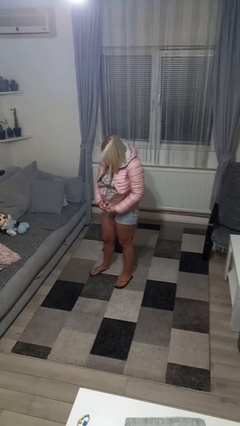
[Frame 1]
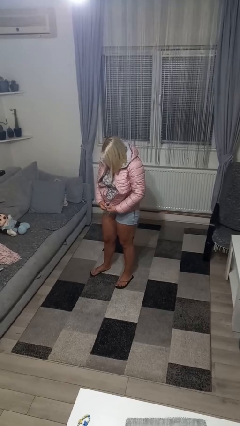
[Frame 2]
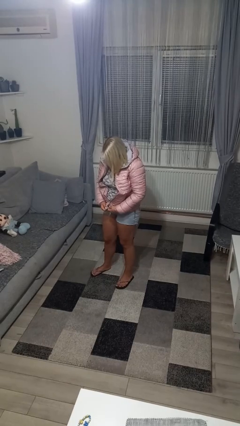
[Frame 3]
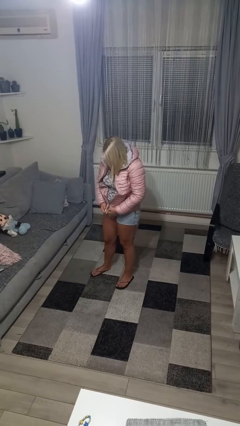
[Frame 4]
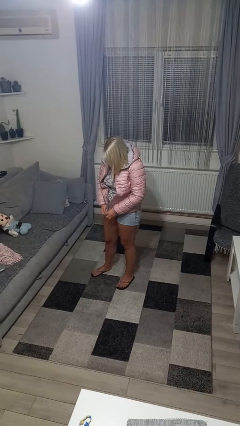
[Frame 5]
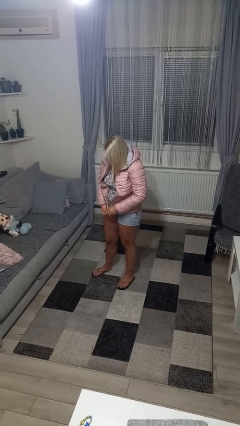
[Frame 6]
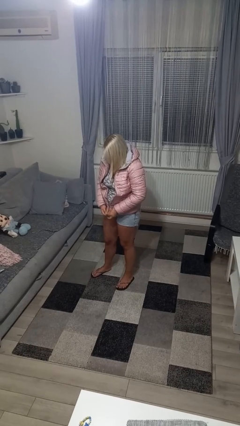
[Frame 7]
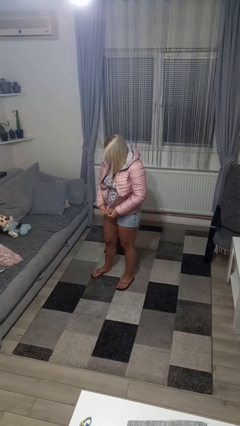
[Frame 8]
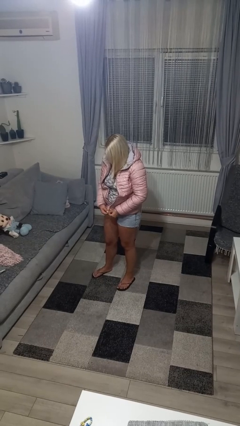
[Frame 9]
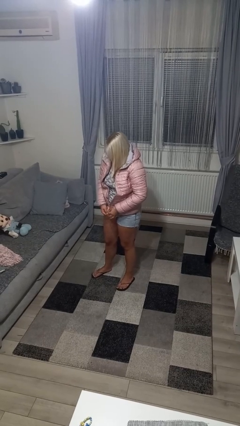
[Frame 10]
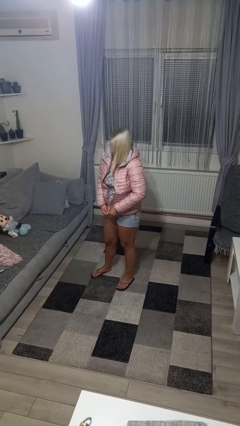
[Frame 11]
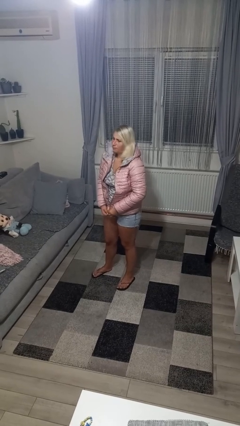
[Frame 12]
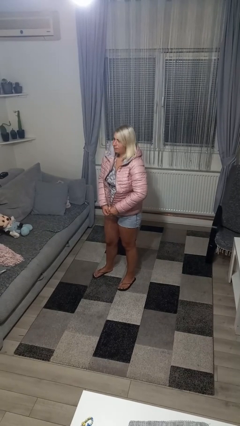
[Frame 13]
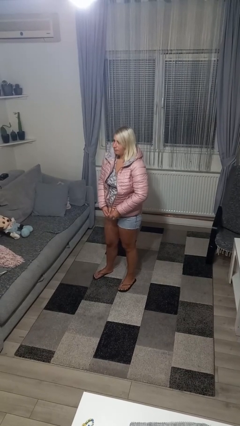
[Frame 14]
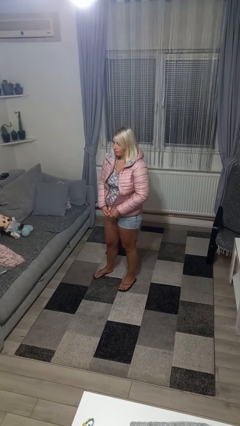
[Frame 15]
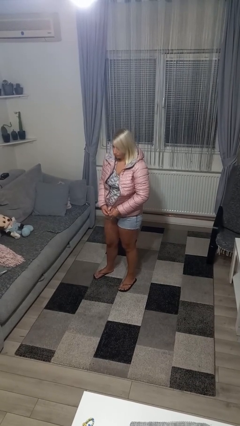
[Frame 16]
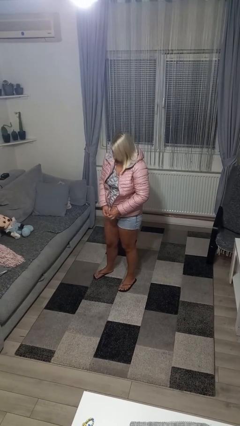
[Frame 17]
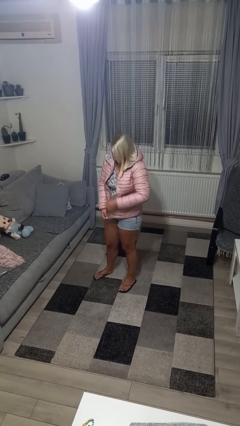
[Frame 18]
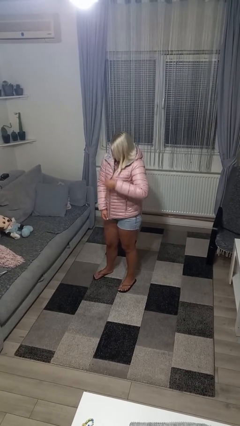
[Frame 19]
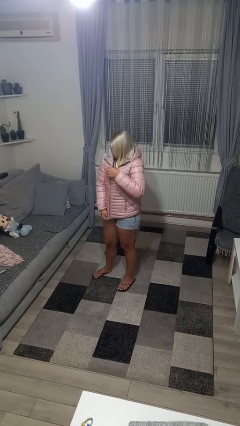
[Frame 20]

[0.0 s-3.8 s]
person zips up jacket

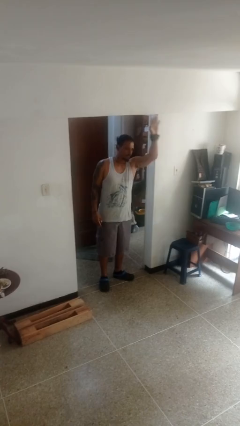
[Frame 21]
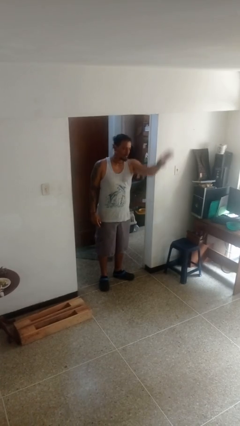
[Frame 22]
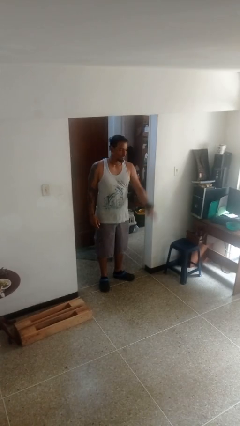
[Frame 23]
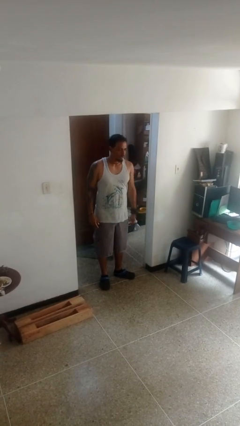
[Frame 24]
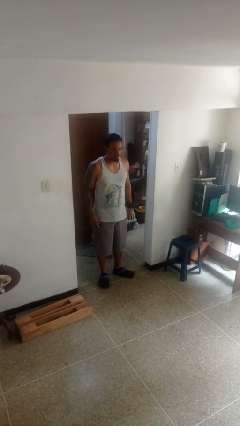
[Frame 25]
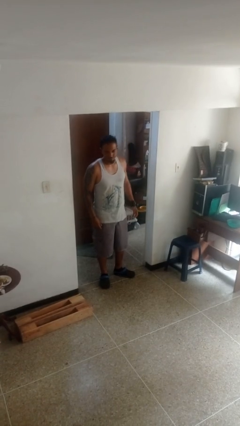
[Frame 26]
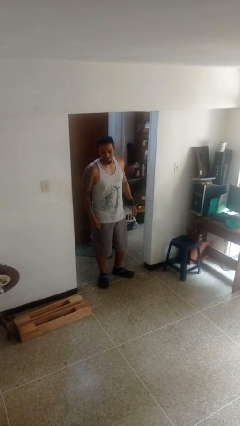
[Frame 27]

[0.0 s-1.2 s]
person gestures swipe down

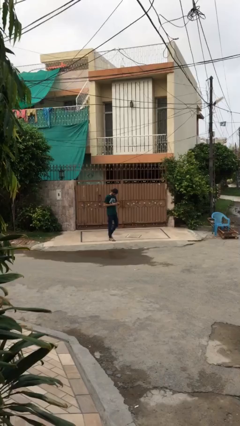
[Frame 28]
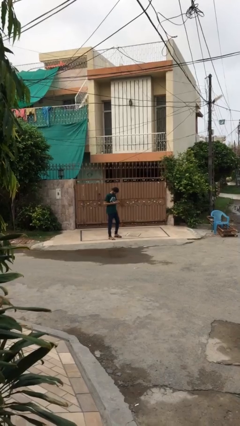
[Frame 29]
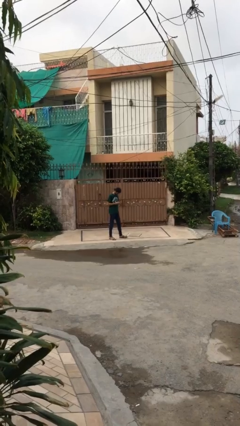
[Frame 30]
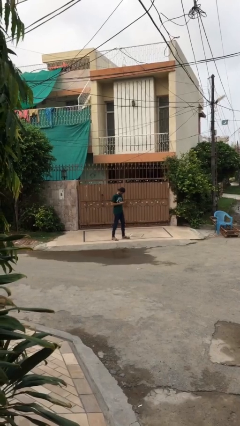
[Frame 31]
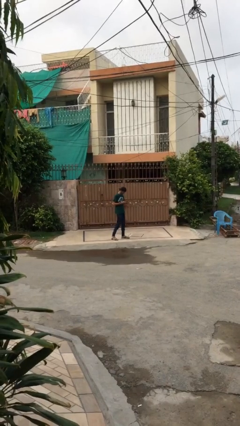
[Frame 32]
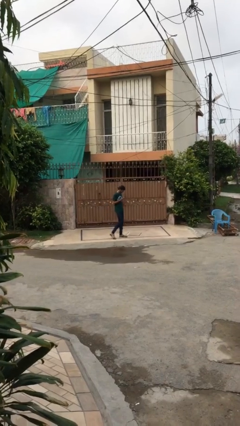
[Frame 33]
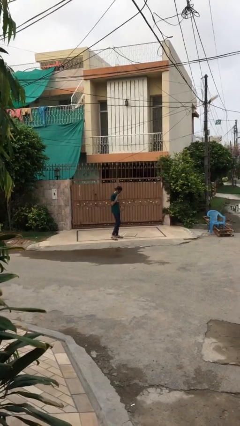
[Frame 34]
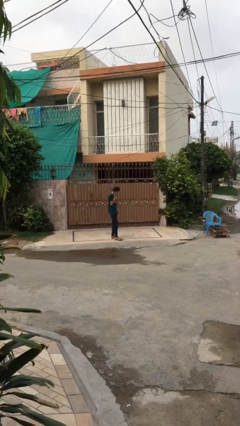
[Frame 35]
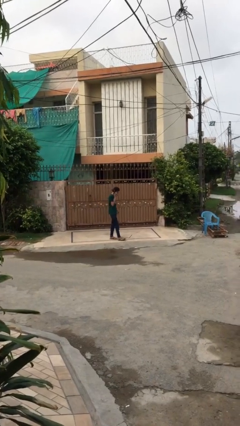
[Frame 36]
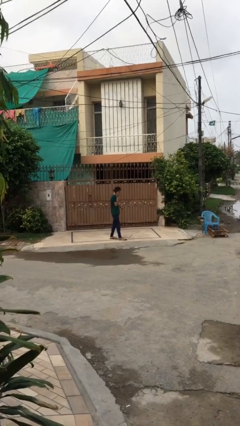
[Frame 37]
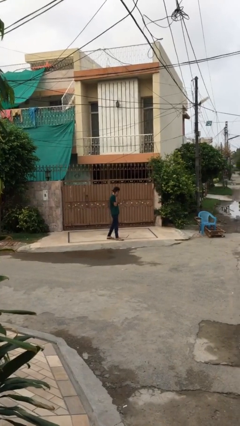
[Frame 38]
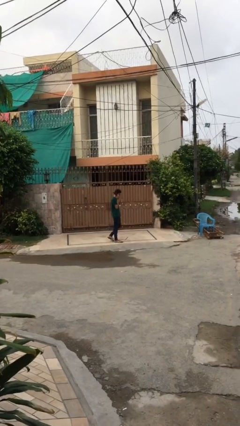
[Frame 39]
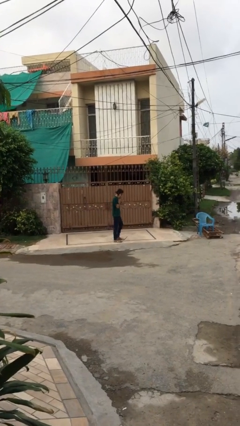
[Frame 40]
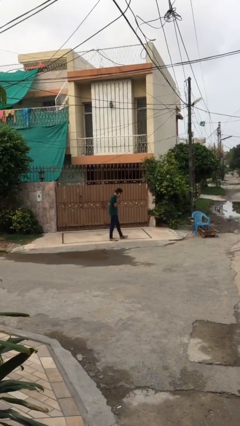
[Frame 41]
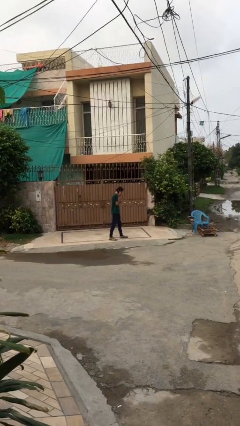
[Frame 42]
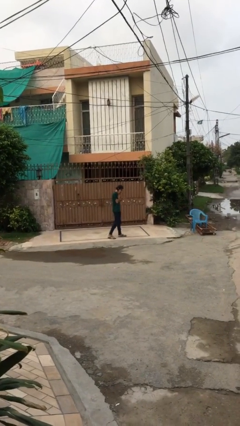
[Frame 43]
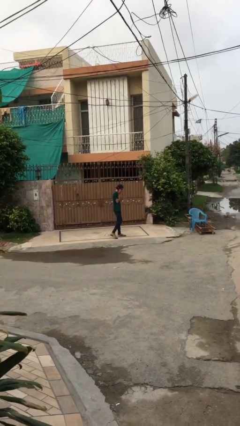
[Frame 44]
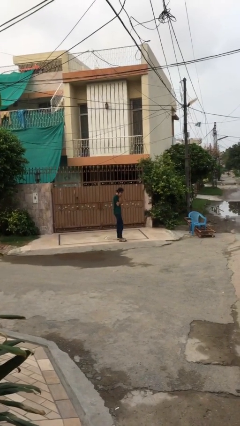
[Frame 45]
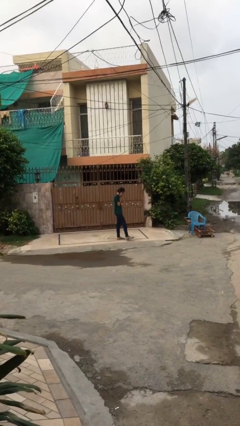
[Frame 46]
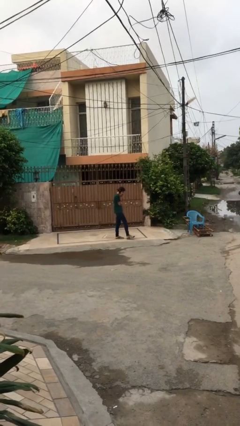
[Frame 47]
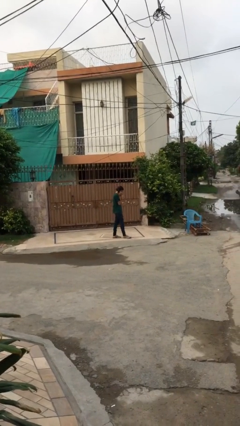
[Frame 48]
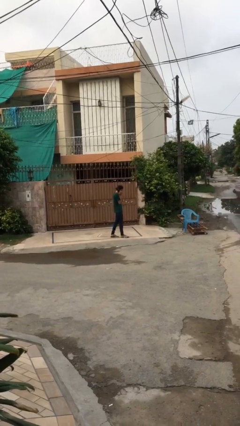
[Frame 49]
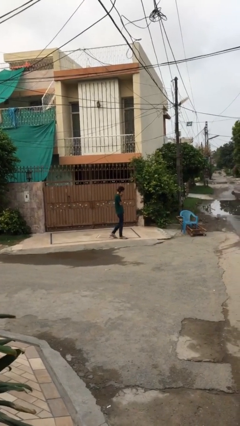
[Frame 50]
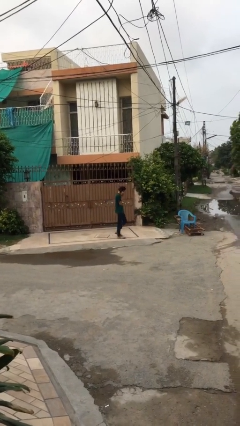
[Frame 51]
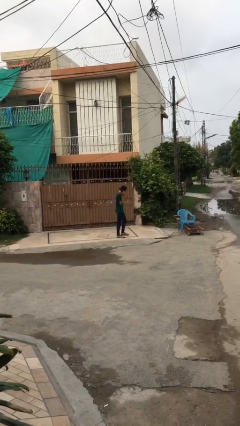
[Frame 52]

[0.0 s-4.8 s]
person talks on phone

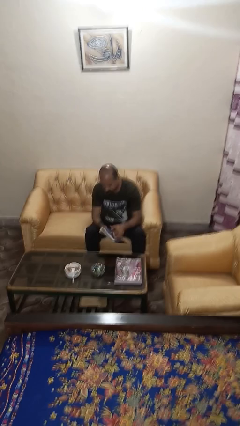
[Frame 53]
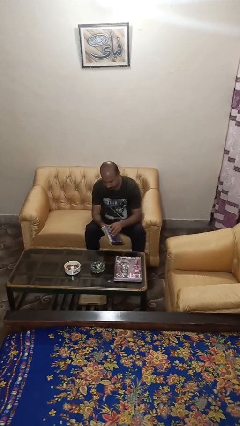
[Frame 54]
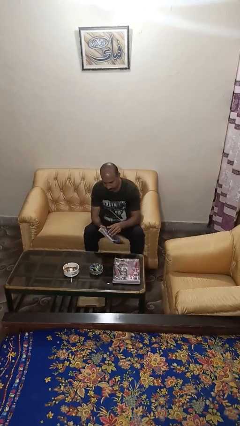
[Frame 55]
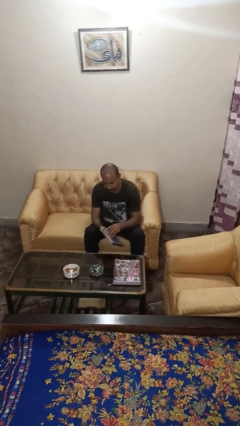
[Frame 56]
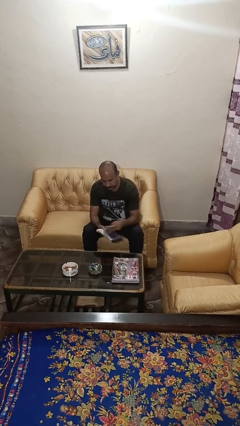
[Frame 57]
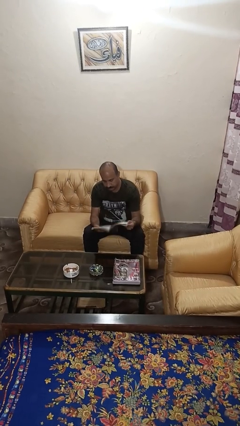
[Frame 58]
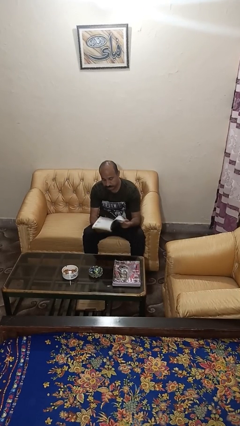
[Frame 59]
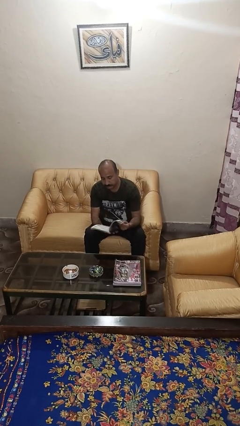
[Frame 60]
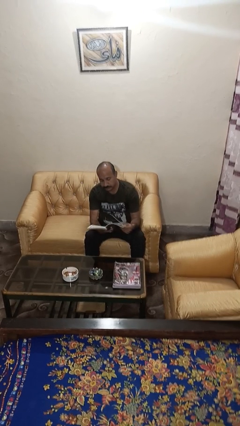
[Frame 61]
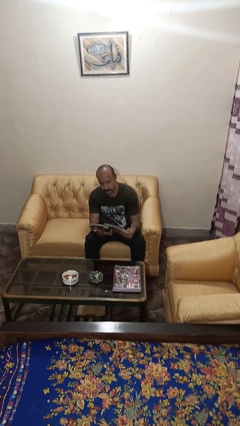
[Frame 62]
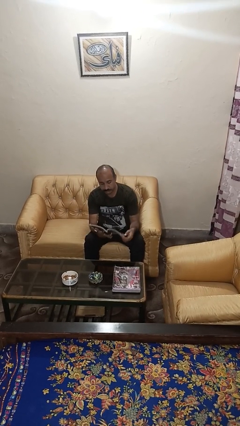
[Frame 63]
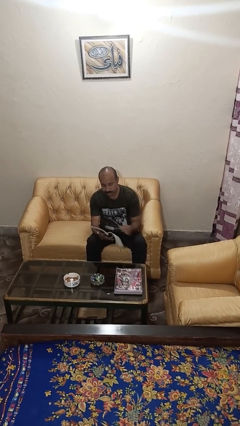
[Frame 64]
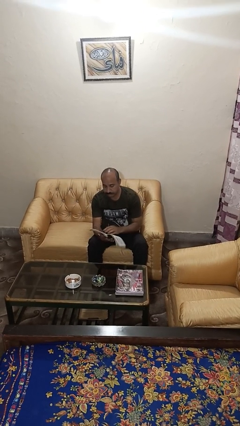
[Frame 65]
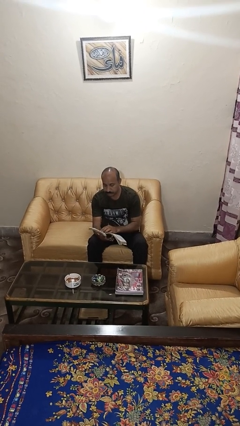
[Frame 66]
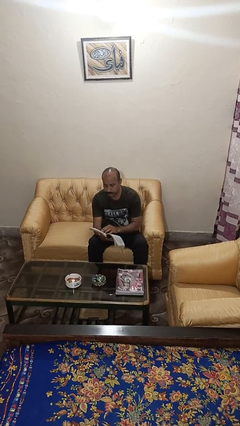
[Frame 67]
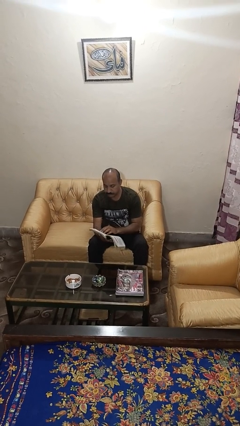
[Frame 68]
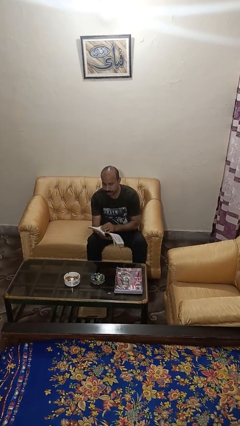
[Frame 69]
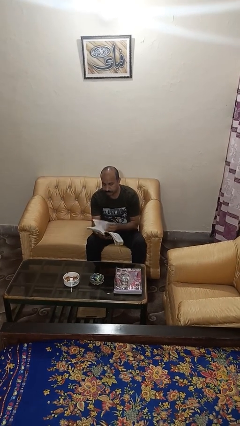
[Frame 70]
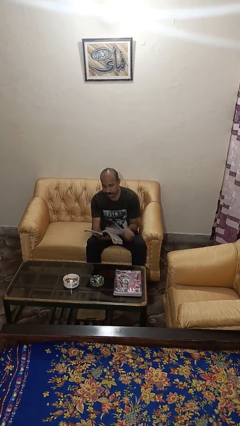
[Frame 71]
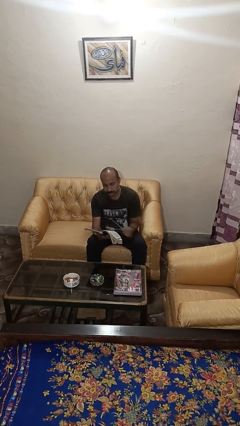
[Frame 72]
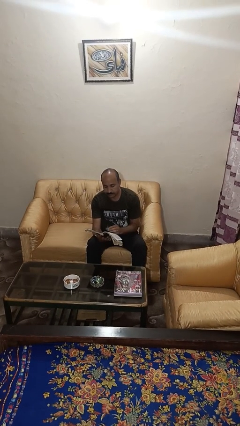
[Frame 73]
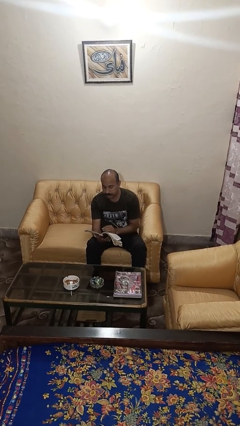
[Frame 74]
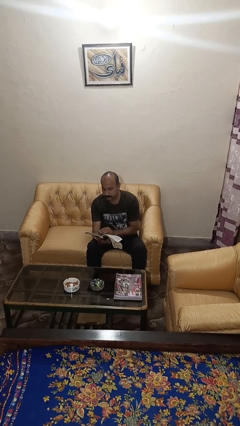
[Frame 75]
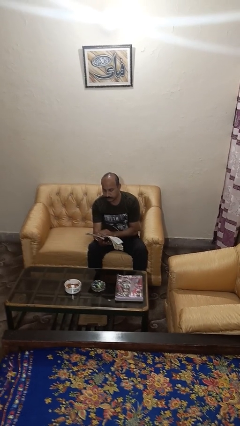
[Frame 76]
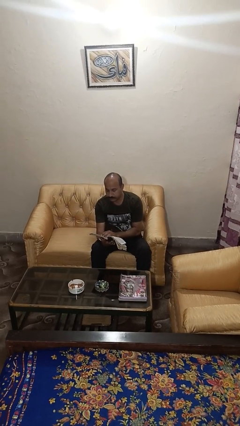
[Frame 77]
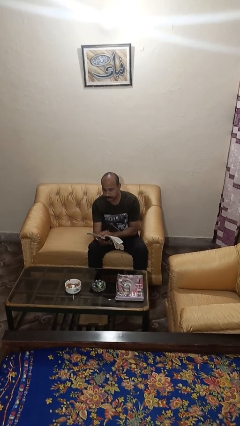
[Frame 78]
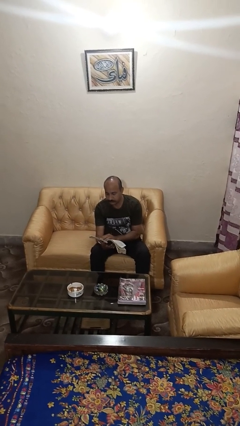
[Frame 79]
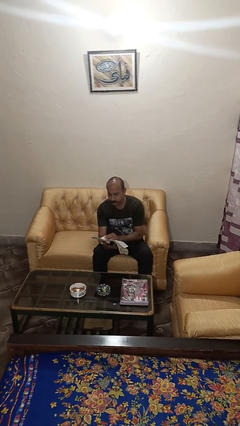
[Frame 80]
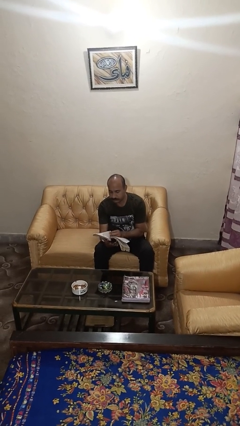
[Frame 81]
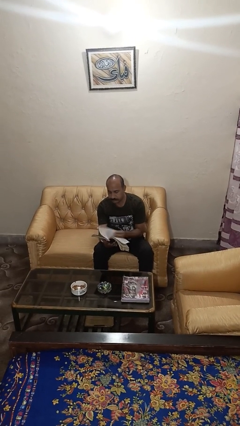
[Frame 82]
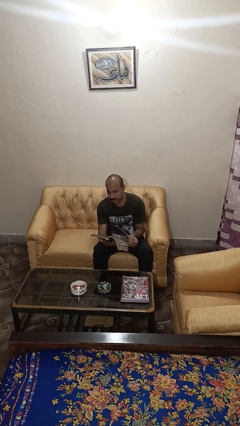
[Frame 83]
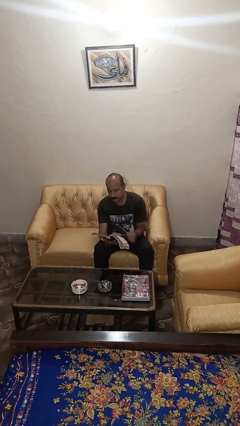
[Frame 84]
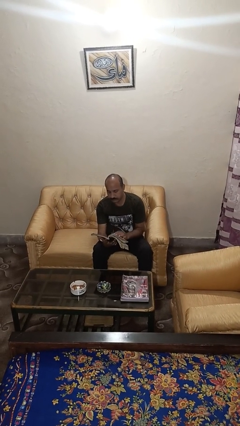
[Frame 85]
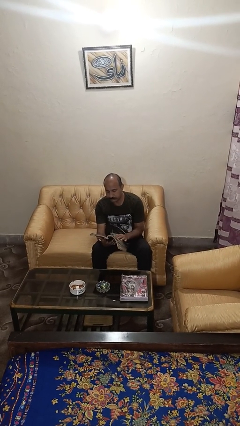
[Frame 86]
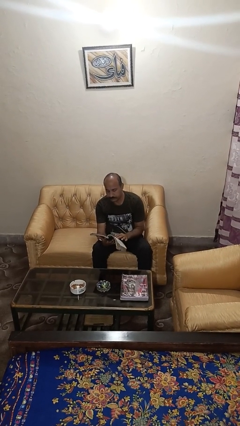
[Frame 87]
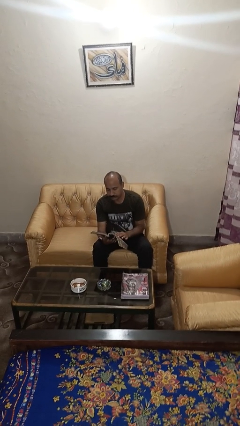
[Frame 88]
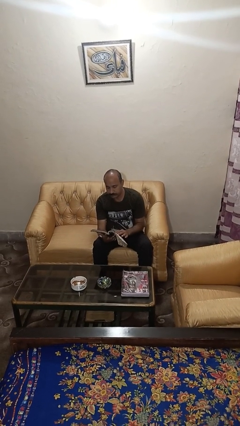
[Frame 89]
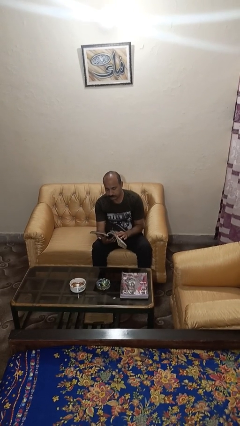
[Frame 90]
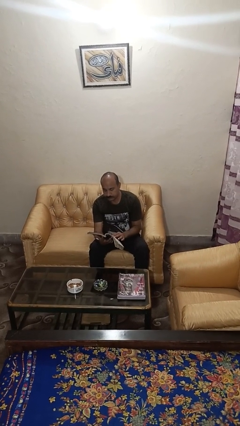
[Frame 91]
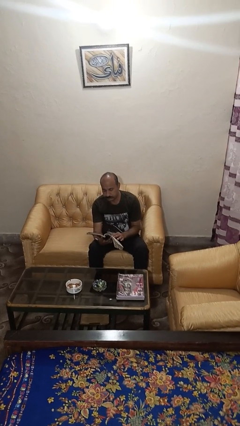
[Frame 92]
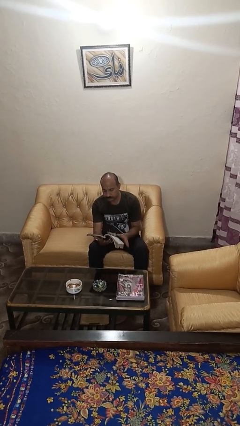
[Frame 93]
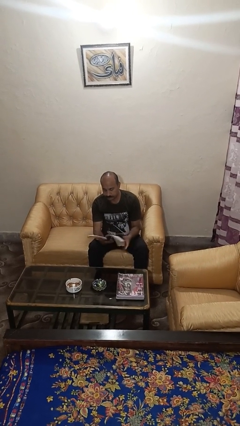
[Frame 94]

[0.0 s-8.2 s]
person reads book
